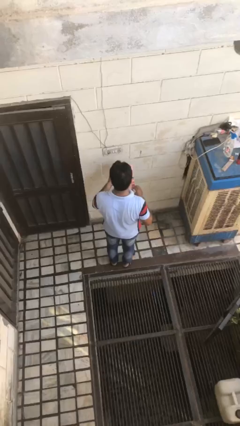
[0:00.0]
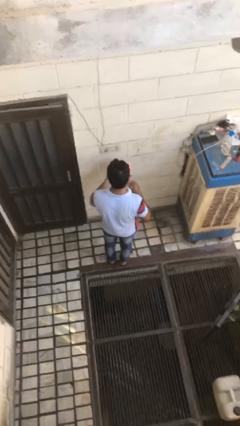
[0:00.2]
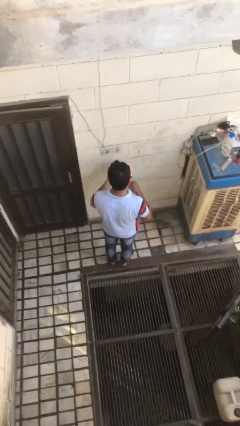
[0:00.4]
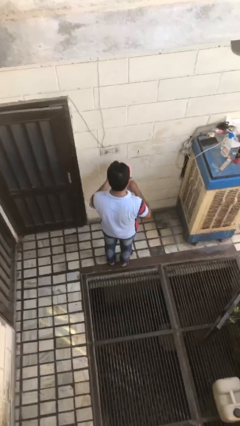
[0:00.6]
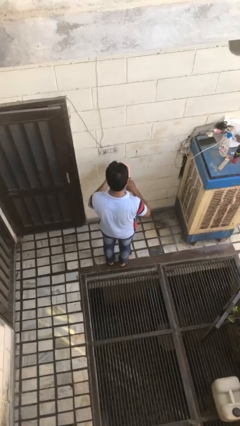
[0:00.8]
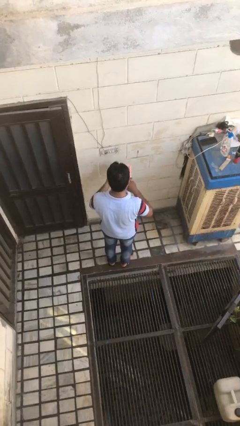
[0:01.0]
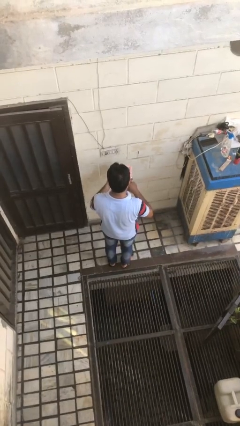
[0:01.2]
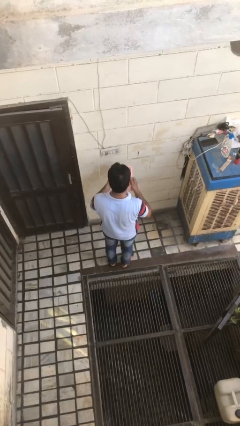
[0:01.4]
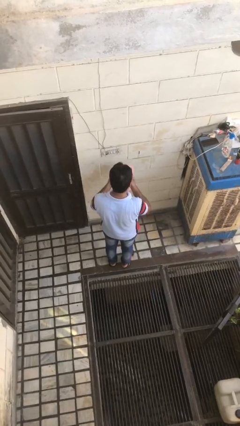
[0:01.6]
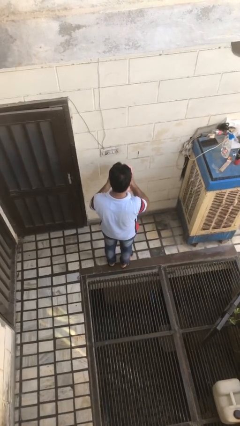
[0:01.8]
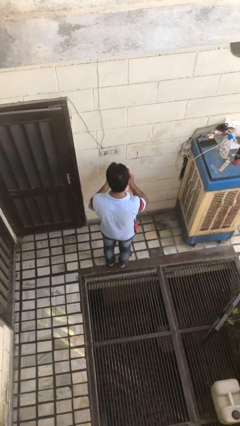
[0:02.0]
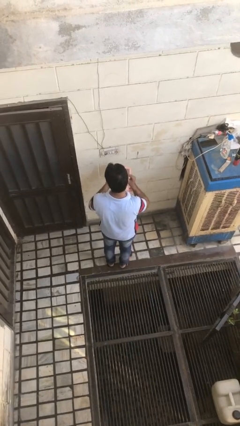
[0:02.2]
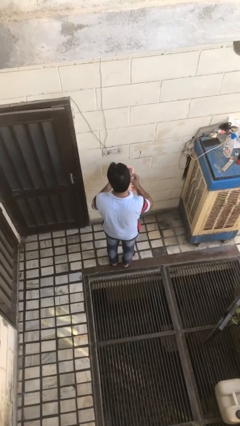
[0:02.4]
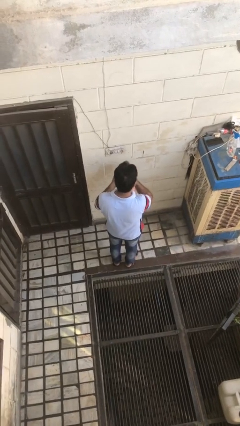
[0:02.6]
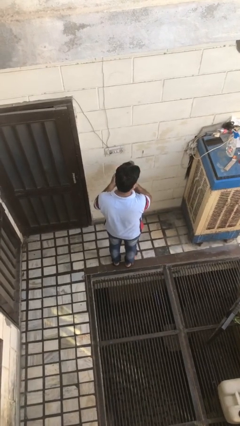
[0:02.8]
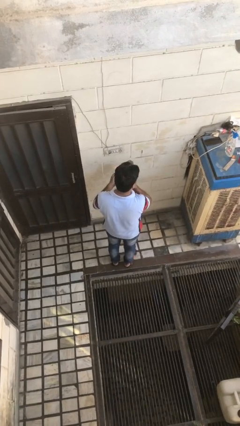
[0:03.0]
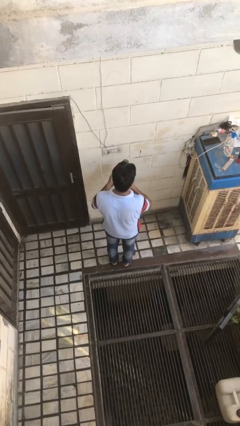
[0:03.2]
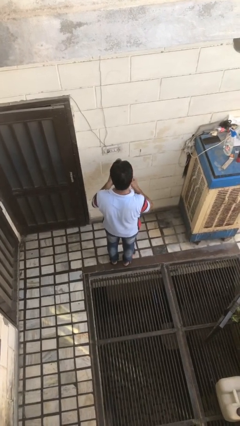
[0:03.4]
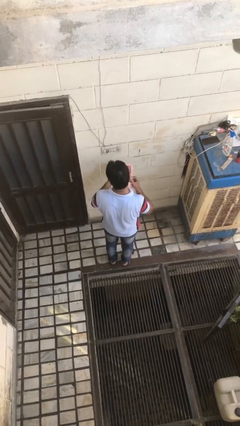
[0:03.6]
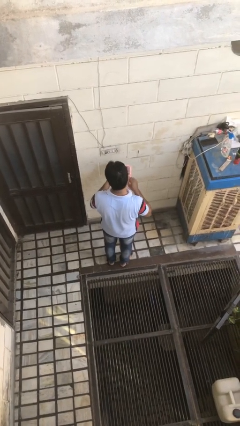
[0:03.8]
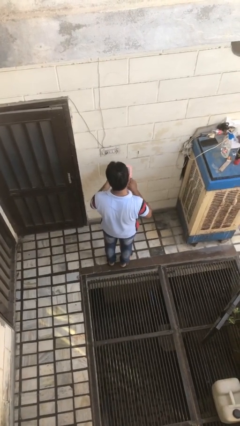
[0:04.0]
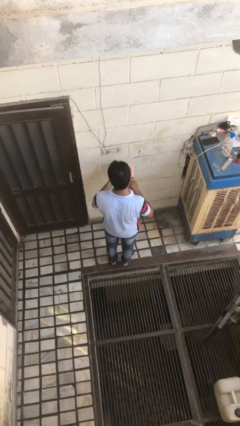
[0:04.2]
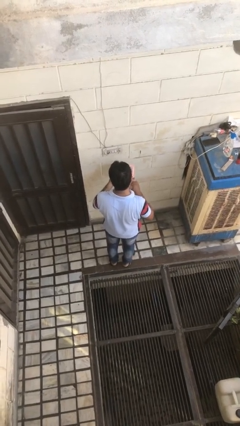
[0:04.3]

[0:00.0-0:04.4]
person applies foundation makeup

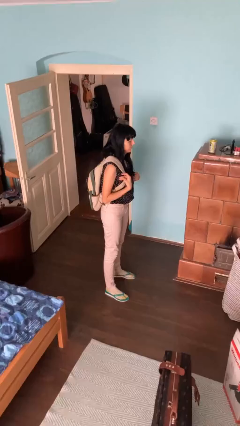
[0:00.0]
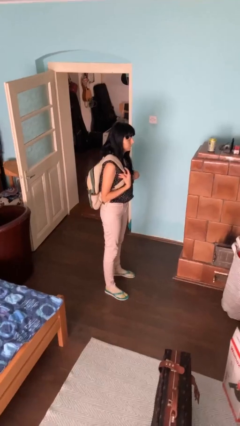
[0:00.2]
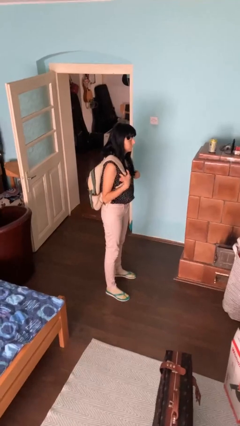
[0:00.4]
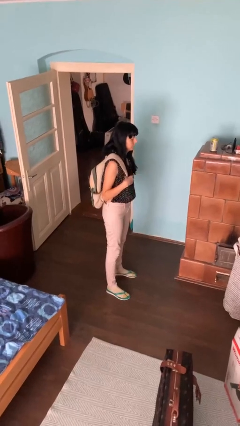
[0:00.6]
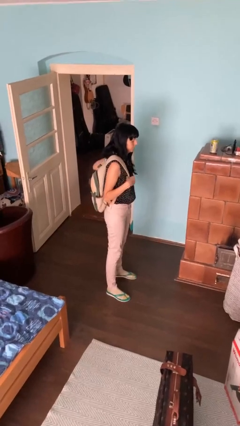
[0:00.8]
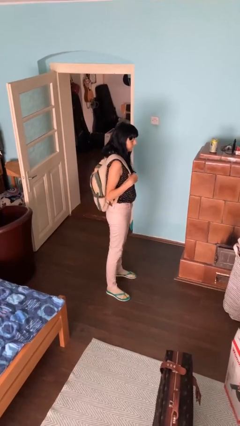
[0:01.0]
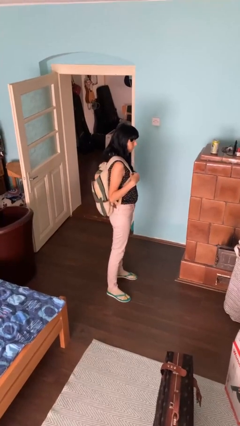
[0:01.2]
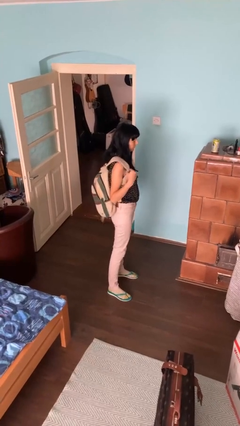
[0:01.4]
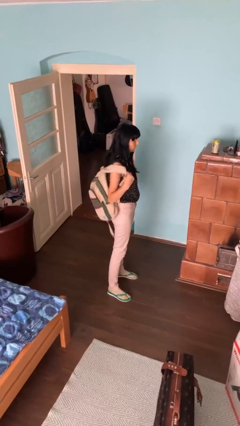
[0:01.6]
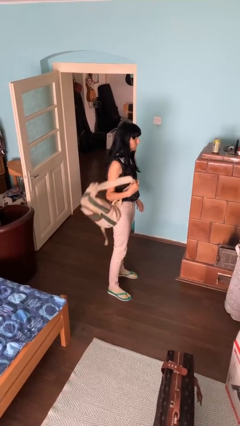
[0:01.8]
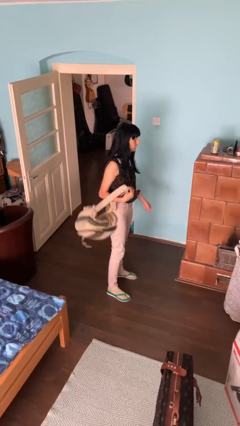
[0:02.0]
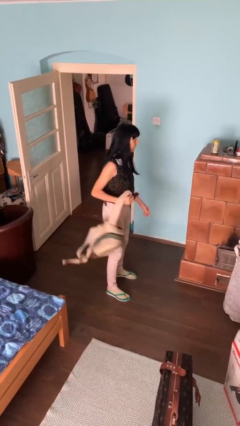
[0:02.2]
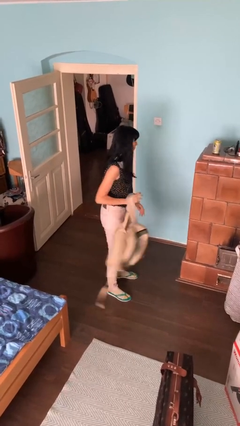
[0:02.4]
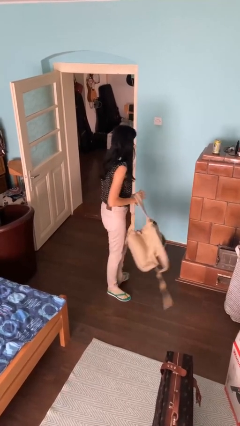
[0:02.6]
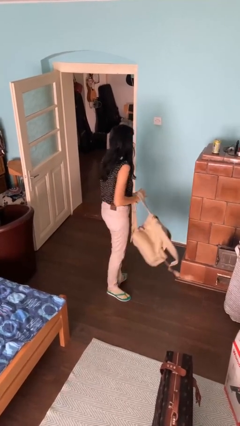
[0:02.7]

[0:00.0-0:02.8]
person takes off backpack

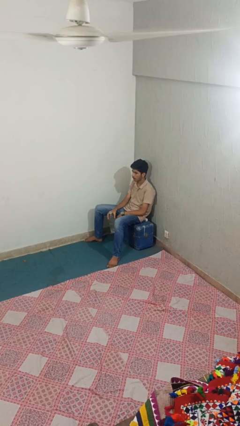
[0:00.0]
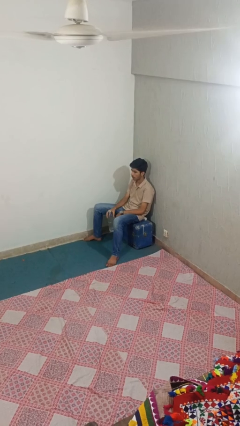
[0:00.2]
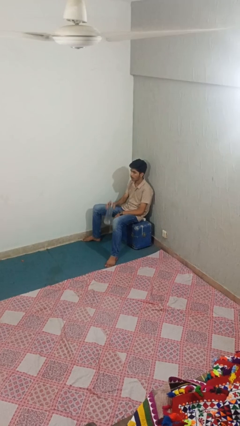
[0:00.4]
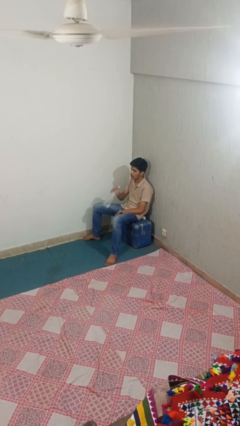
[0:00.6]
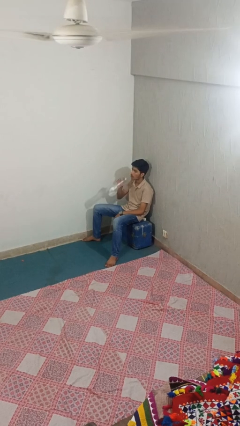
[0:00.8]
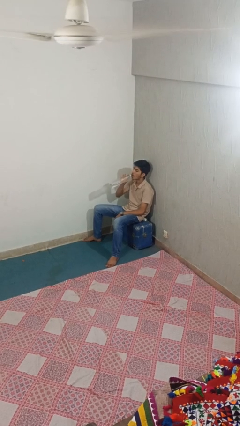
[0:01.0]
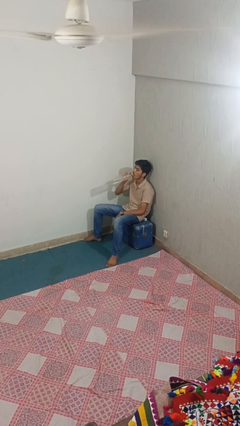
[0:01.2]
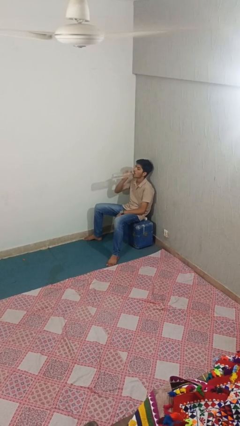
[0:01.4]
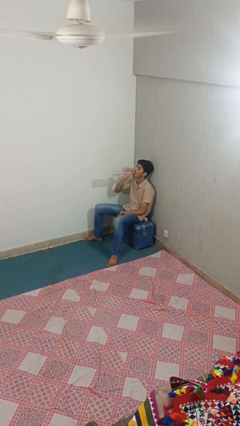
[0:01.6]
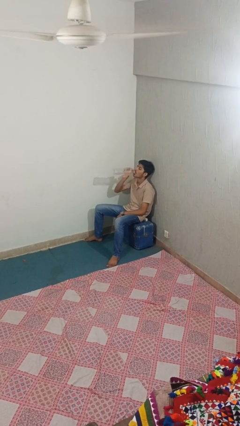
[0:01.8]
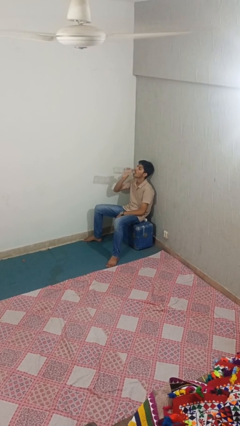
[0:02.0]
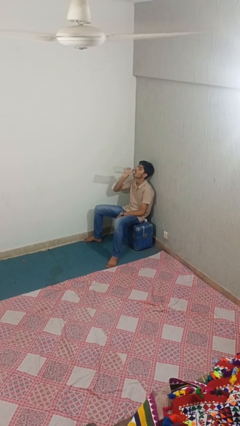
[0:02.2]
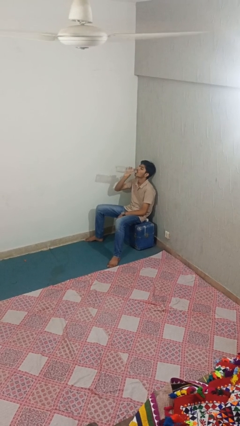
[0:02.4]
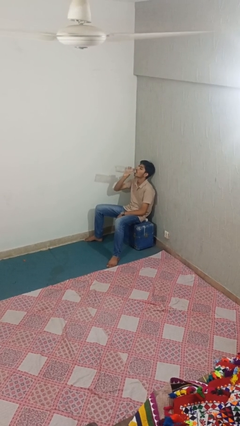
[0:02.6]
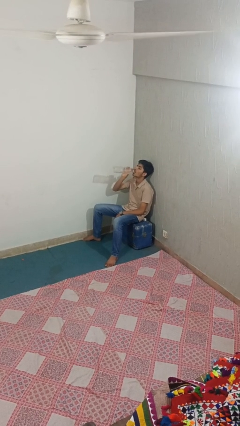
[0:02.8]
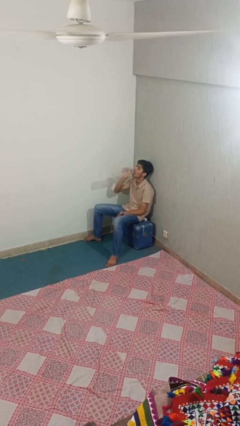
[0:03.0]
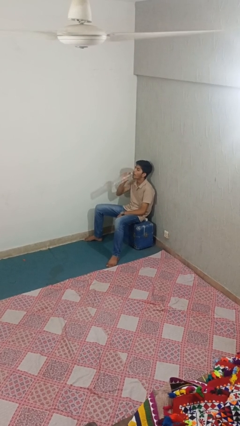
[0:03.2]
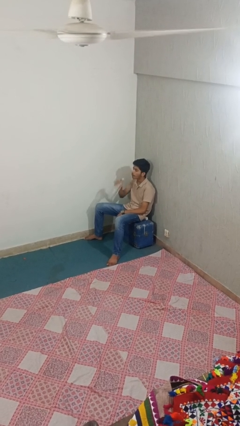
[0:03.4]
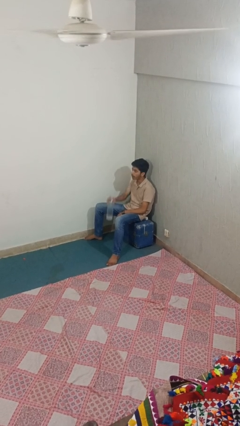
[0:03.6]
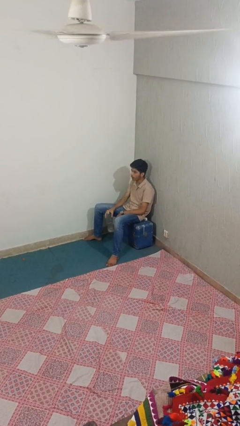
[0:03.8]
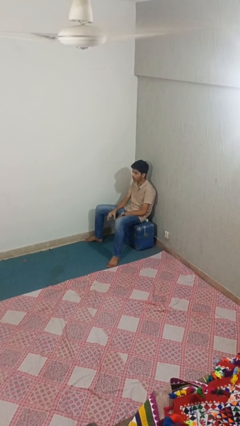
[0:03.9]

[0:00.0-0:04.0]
person drinks from bottle

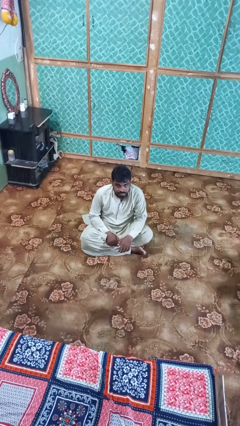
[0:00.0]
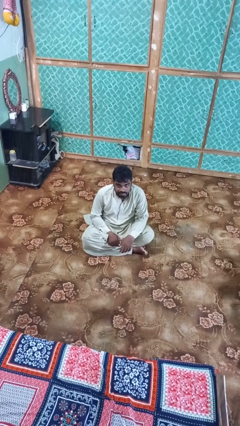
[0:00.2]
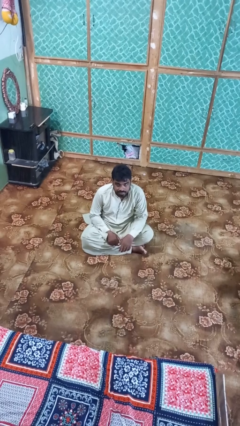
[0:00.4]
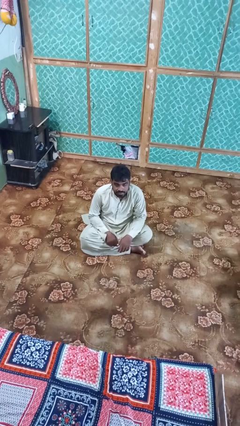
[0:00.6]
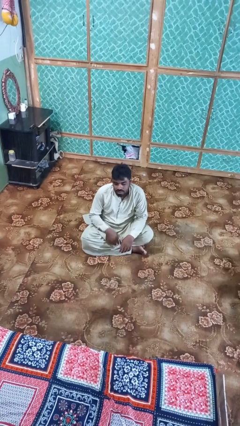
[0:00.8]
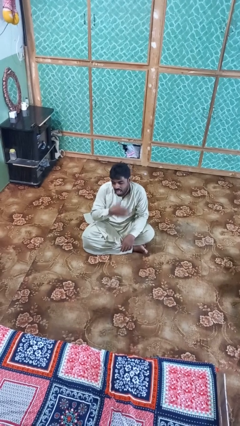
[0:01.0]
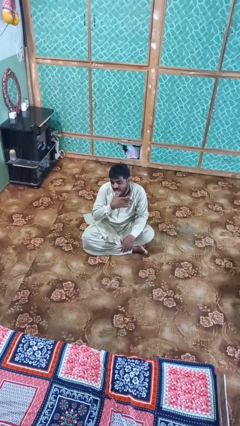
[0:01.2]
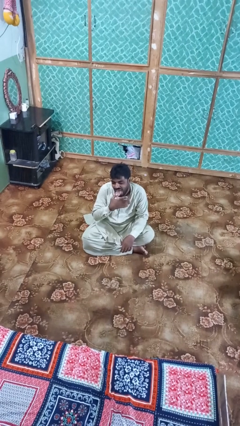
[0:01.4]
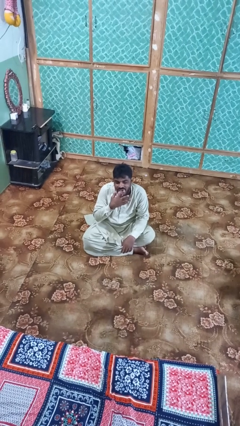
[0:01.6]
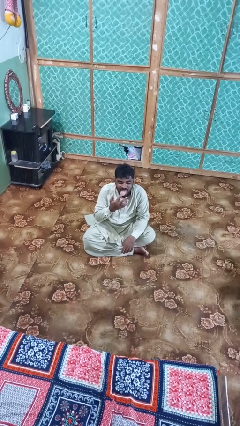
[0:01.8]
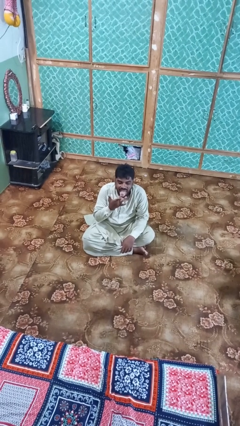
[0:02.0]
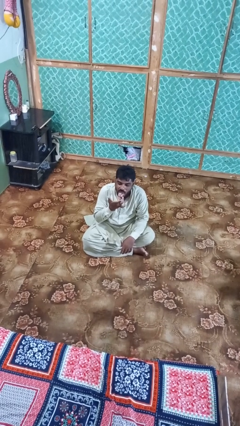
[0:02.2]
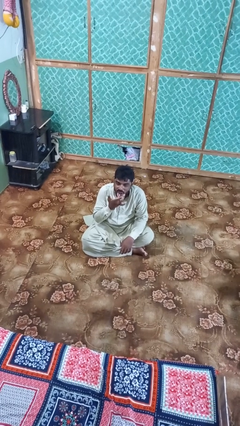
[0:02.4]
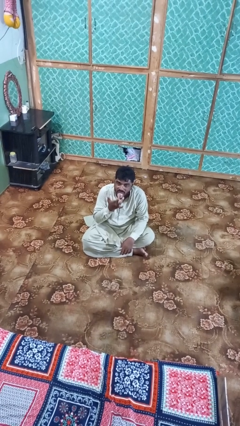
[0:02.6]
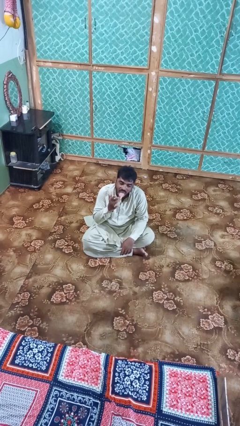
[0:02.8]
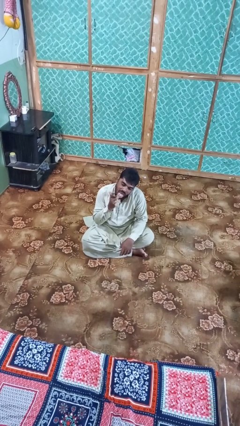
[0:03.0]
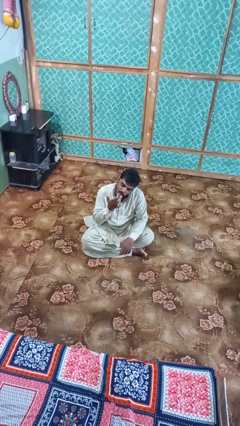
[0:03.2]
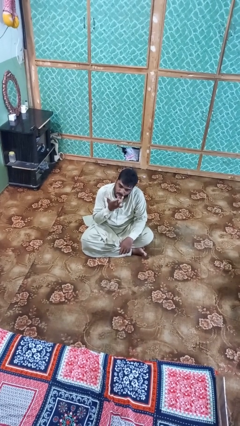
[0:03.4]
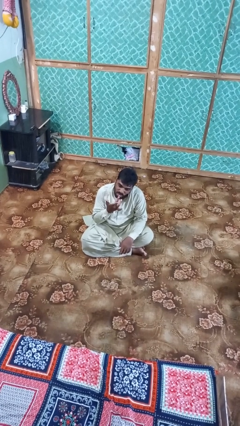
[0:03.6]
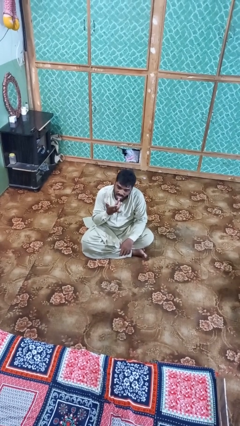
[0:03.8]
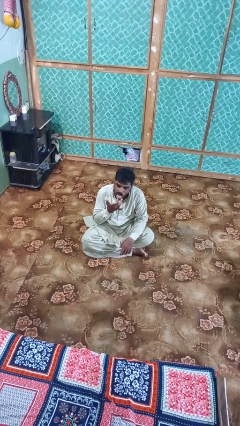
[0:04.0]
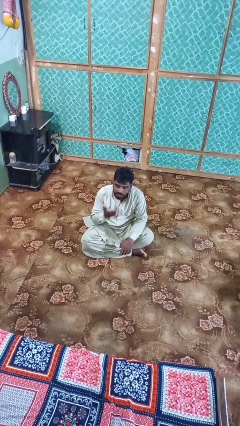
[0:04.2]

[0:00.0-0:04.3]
person licks fingers

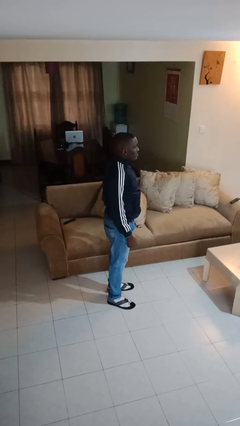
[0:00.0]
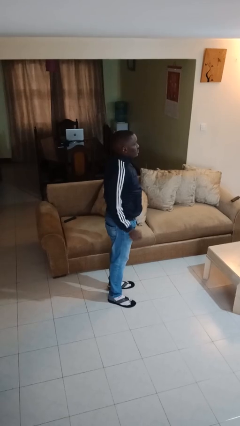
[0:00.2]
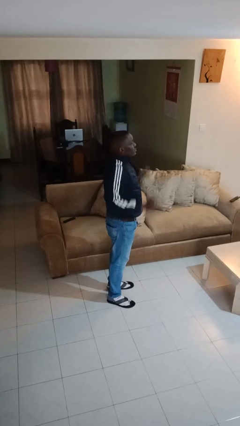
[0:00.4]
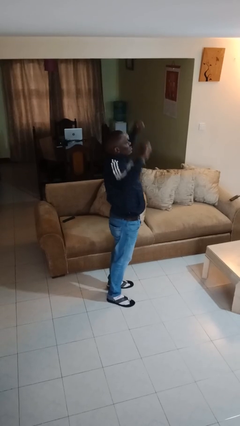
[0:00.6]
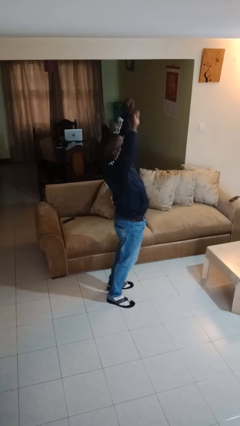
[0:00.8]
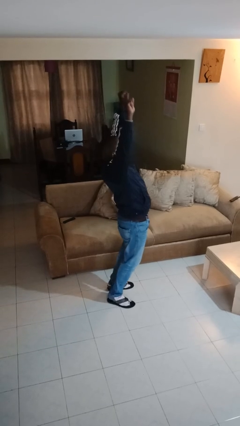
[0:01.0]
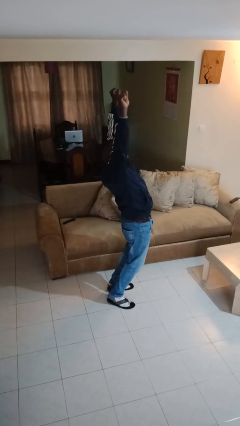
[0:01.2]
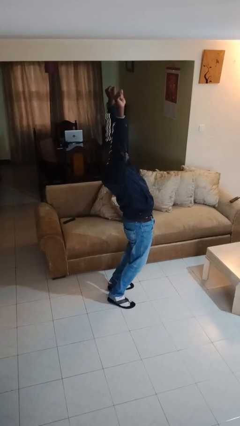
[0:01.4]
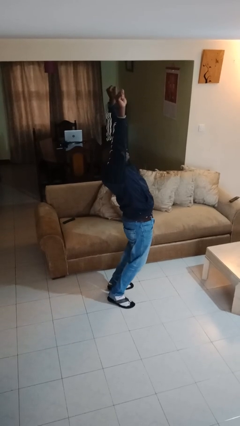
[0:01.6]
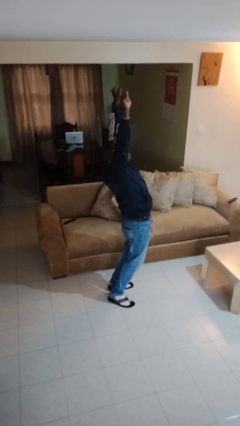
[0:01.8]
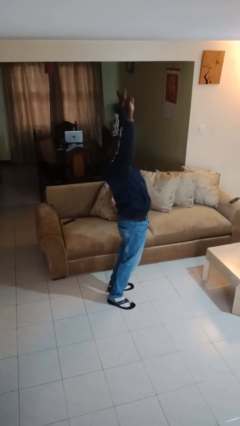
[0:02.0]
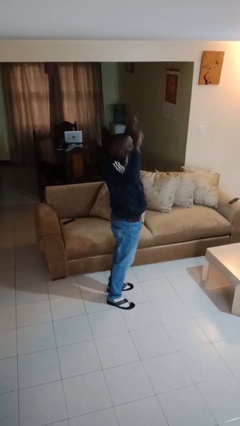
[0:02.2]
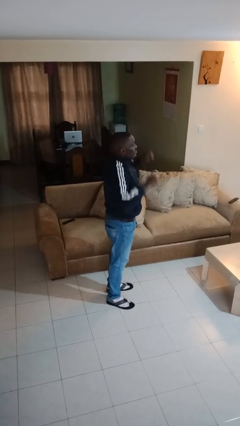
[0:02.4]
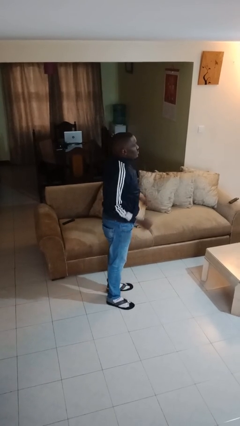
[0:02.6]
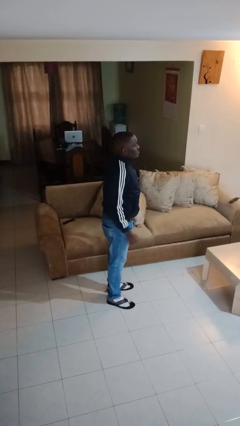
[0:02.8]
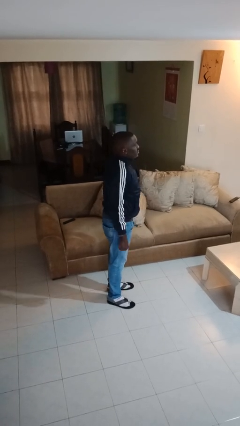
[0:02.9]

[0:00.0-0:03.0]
person stretches arms over head
